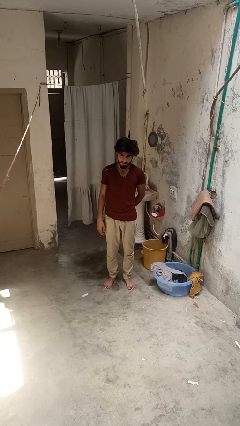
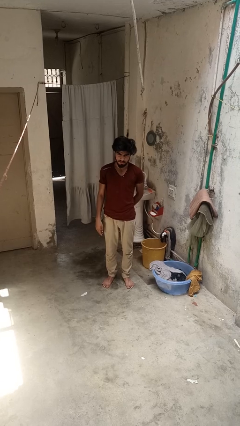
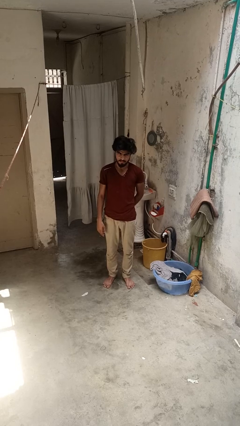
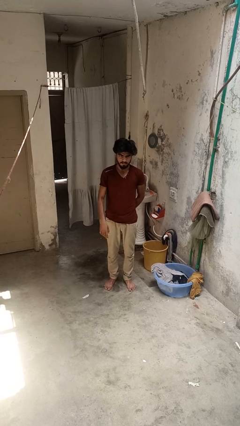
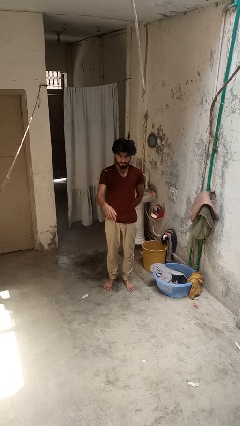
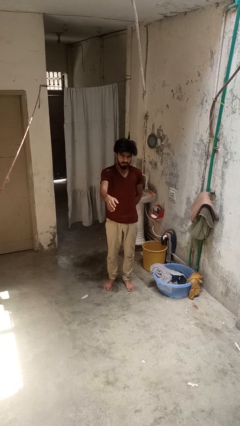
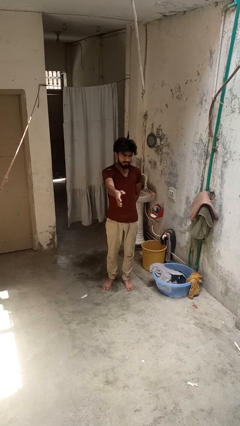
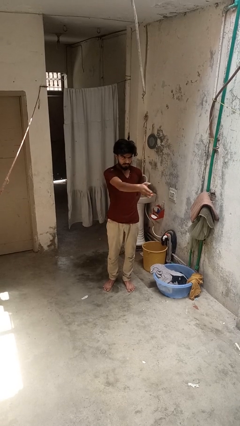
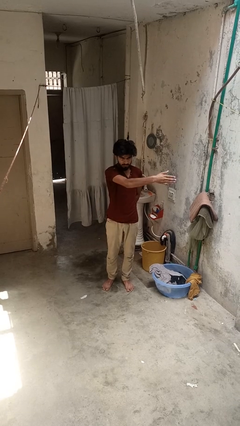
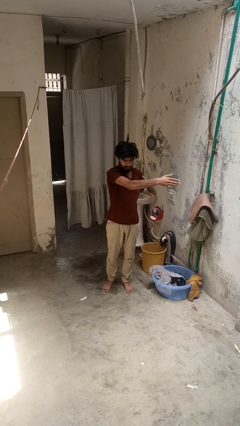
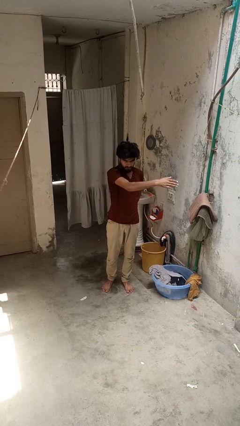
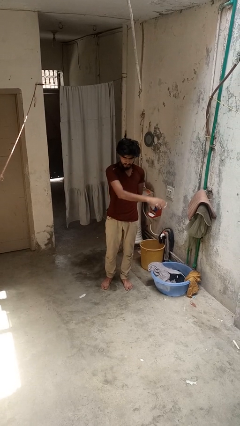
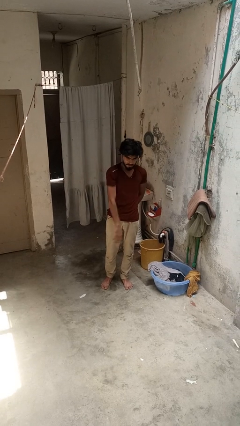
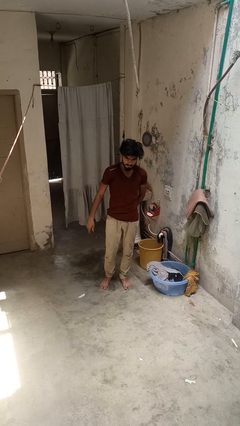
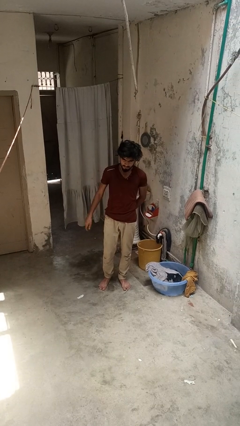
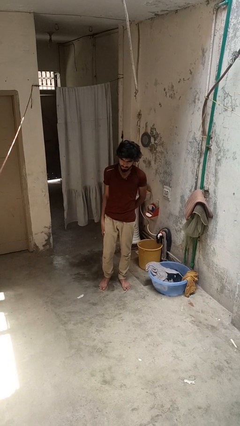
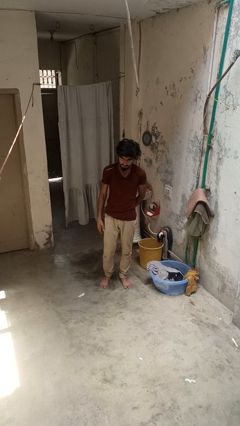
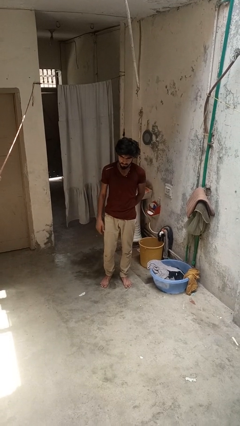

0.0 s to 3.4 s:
person gestures swipe left

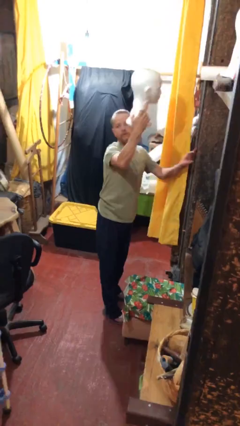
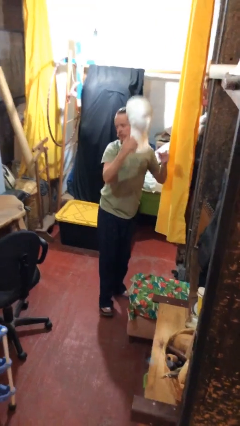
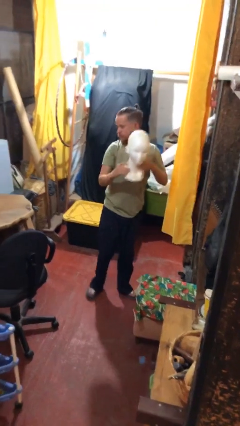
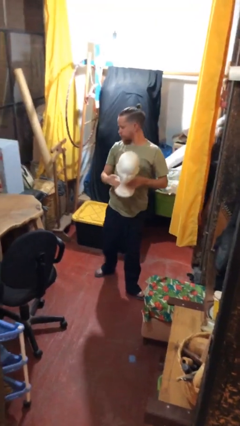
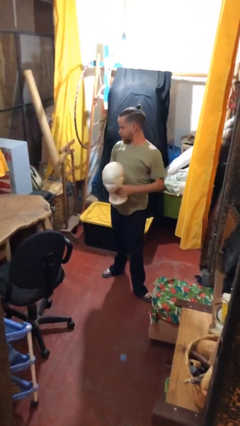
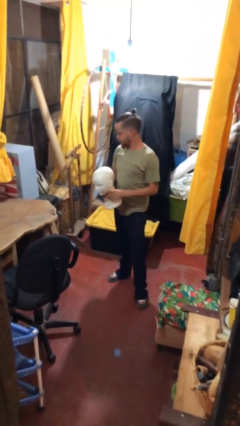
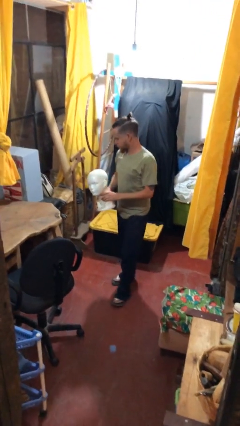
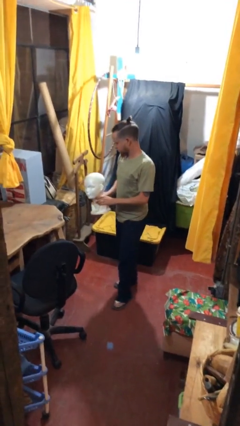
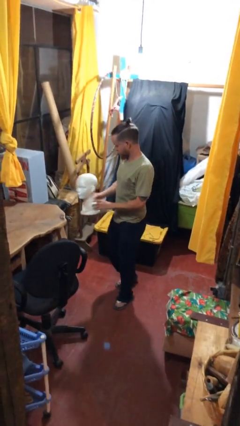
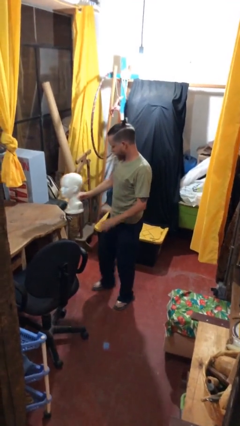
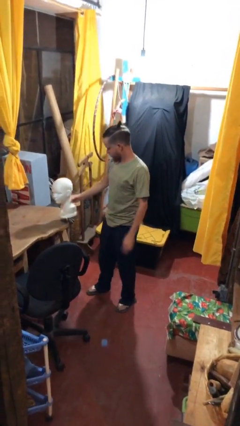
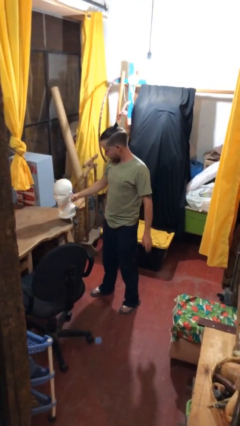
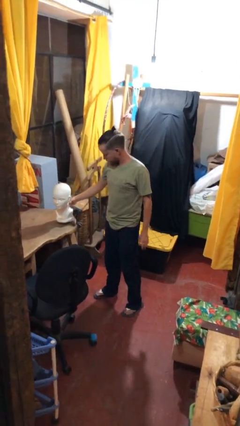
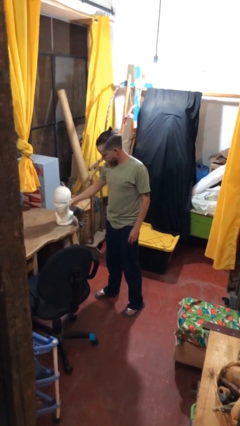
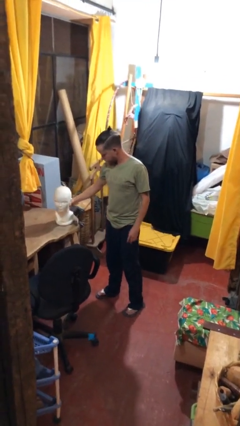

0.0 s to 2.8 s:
person puts down object on table

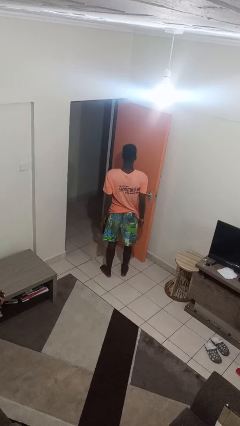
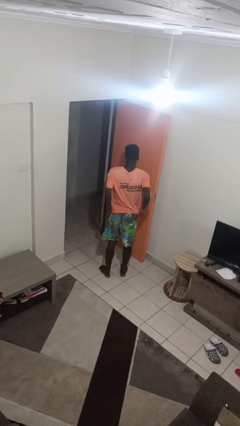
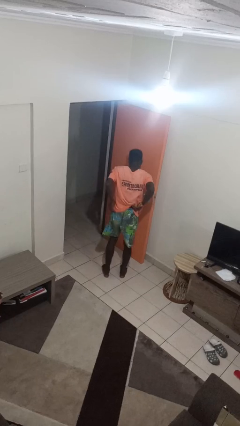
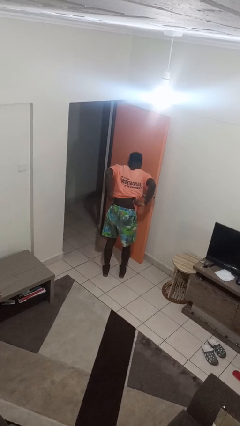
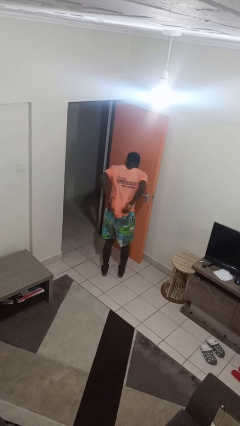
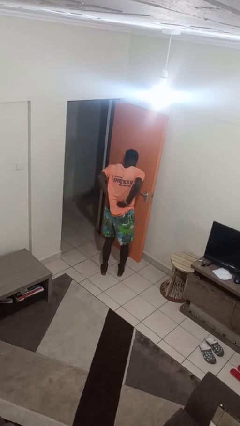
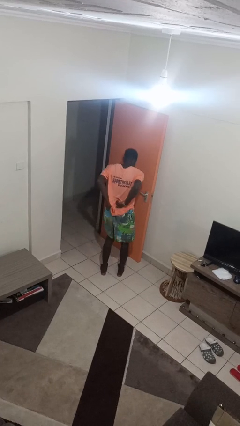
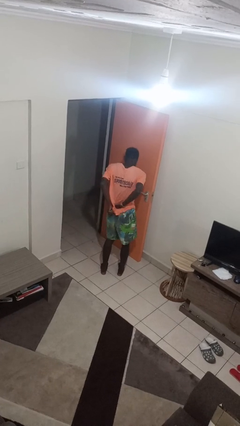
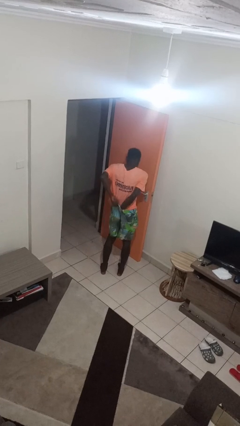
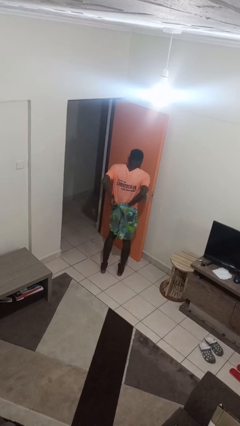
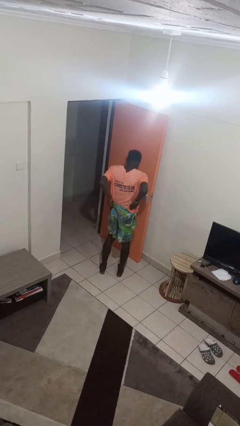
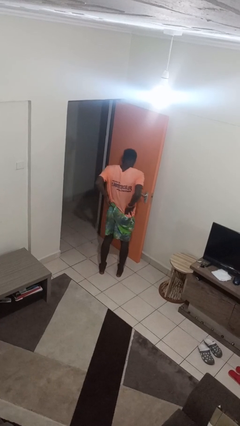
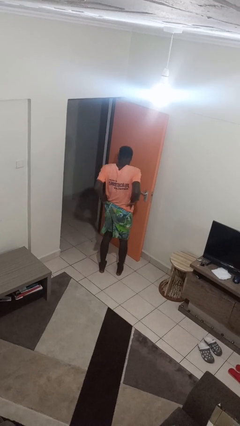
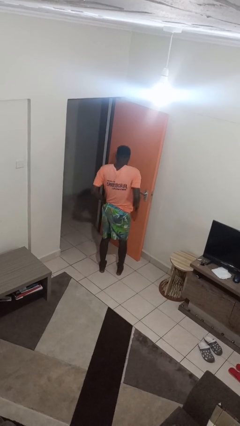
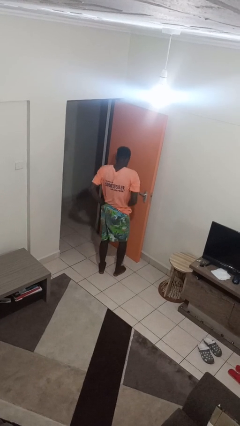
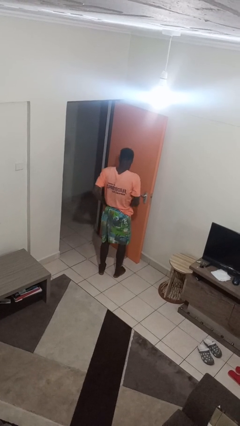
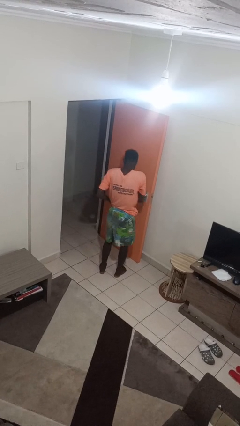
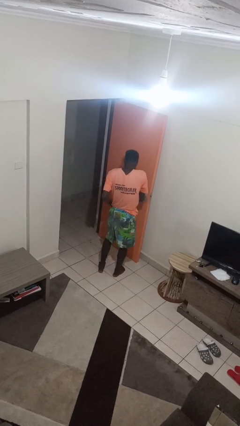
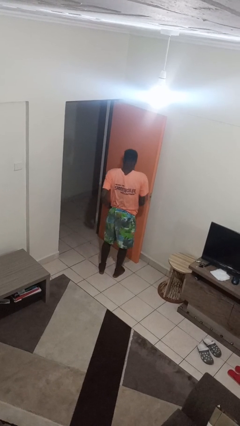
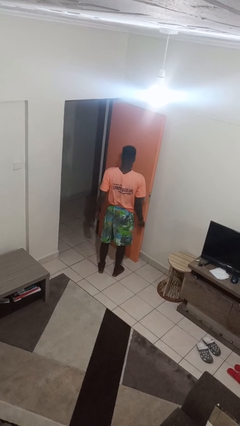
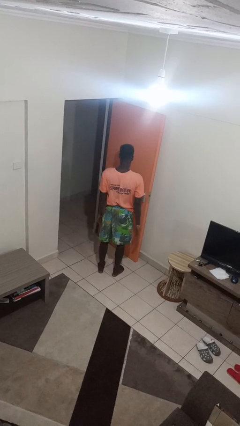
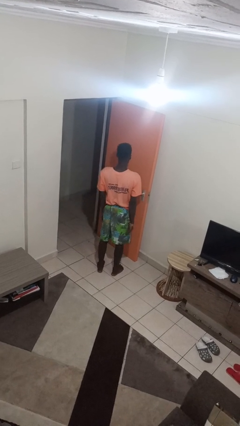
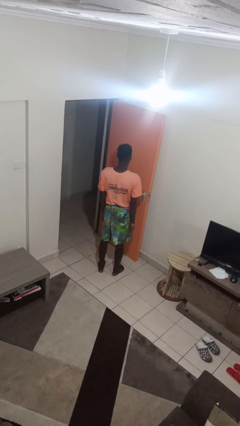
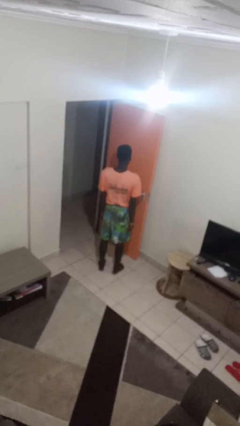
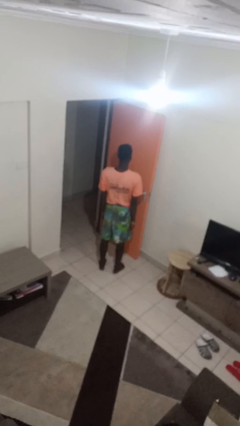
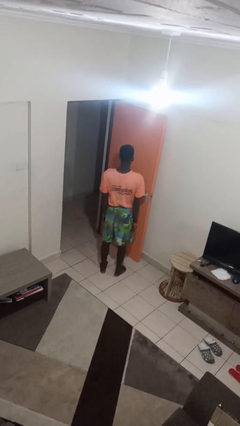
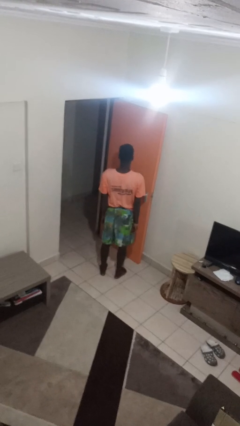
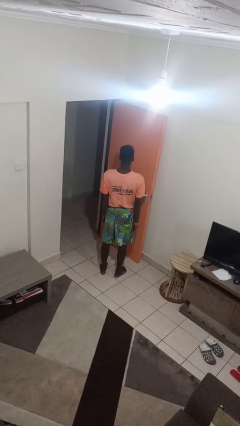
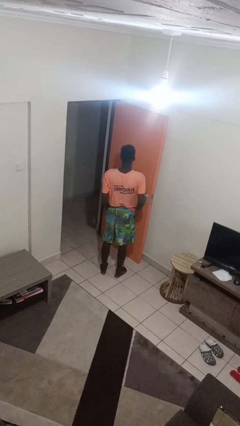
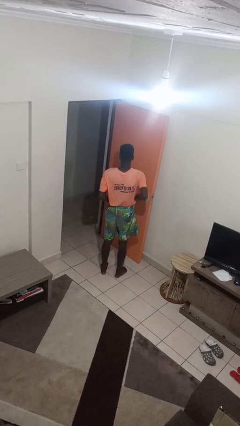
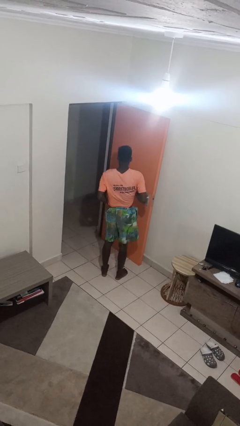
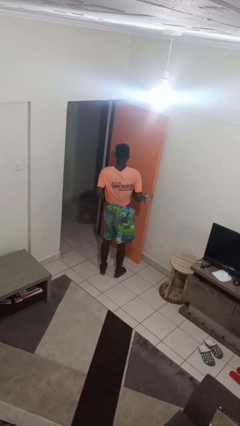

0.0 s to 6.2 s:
person tucks in shirt

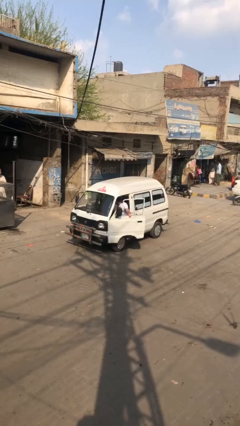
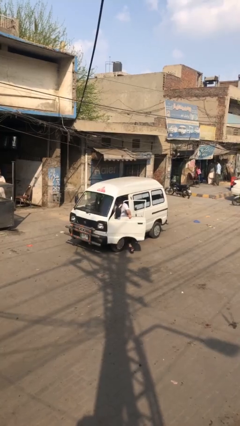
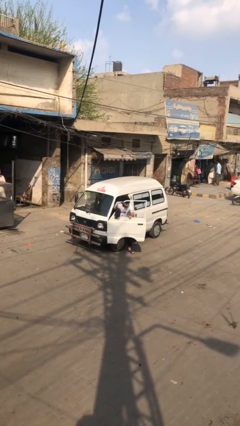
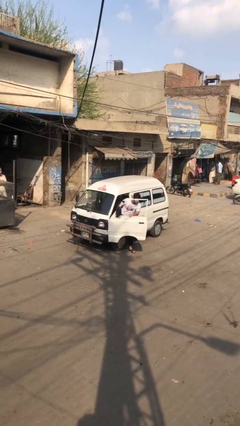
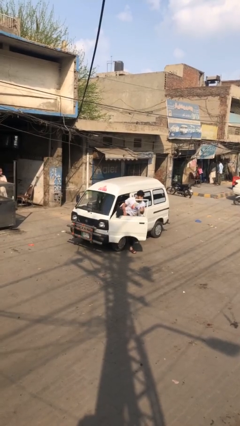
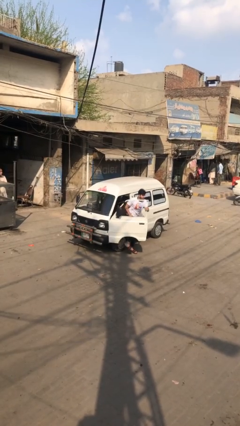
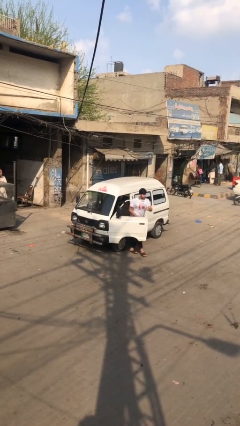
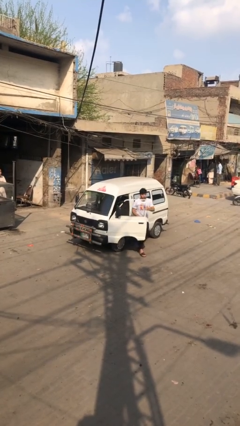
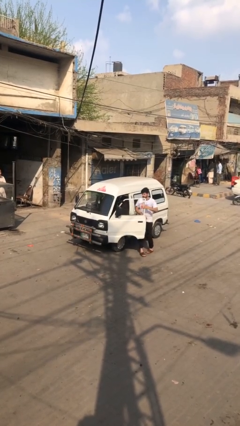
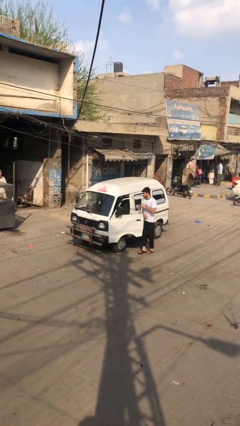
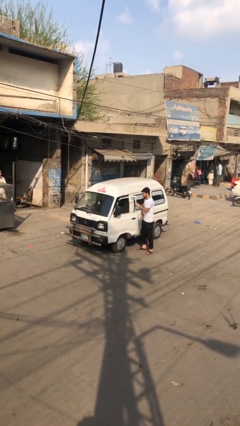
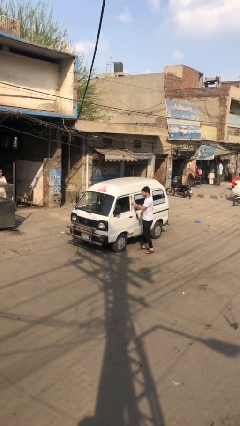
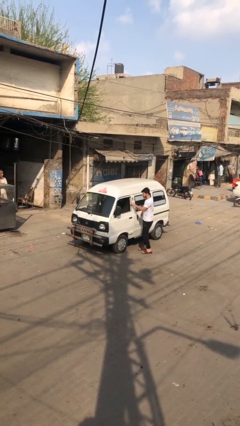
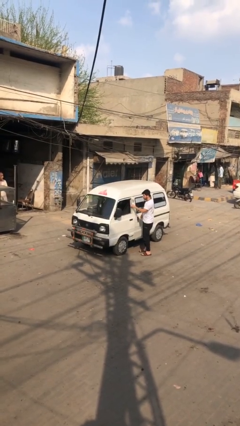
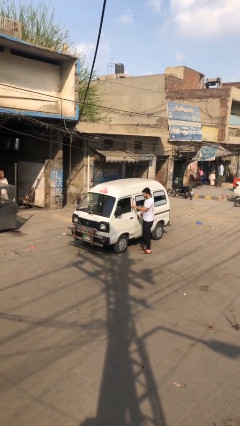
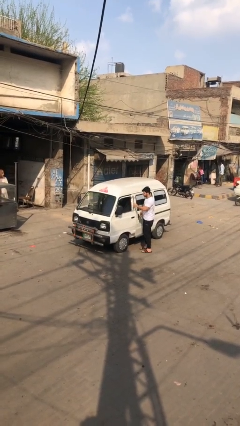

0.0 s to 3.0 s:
car drops off person

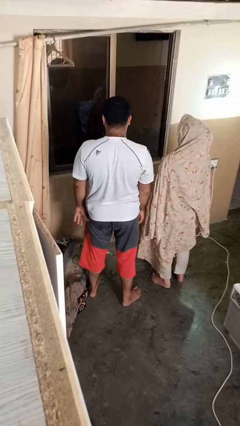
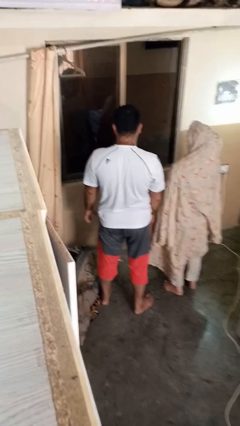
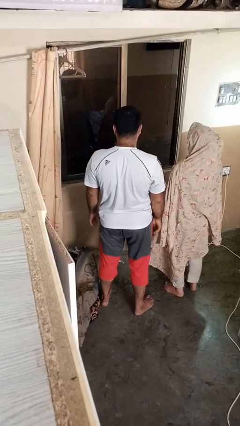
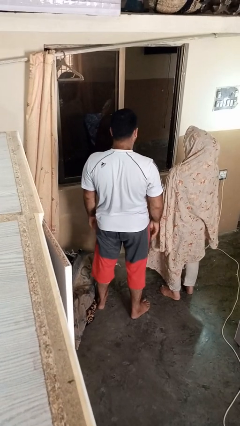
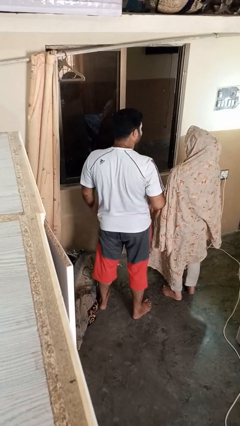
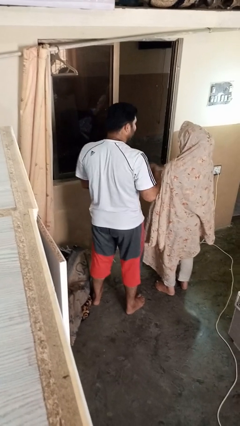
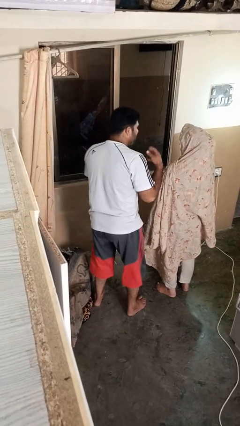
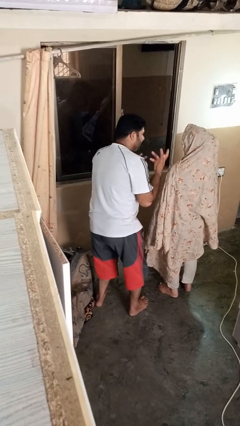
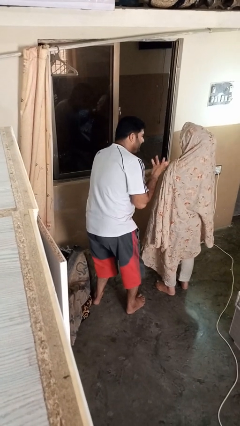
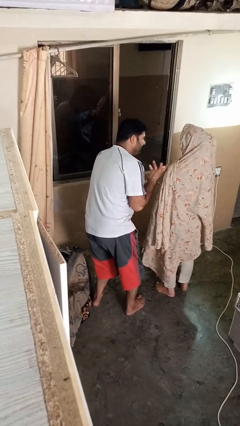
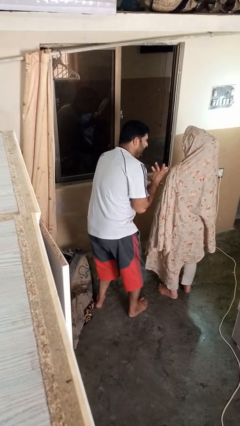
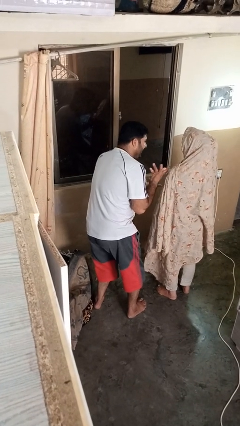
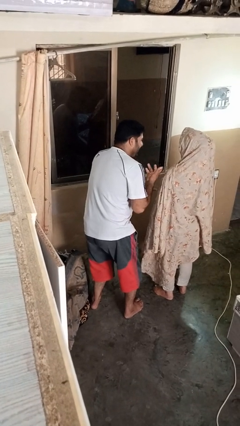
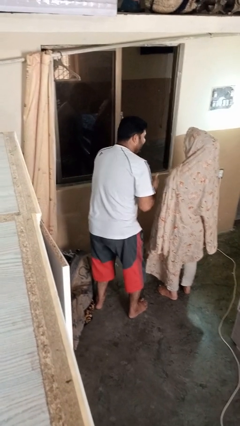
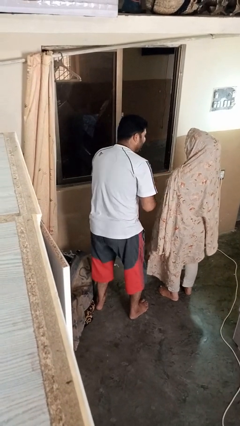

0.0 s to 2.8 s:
person laughs with person
